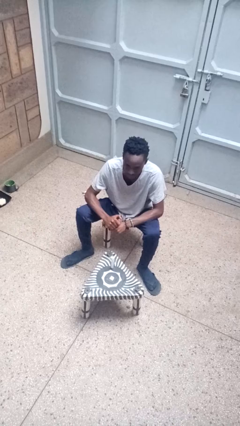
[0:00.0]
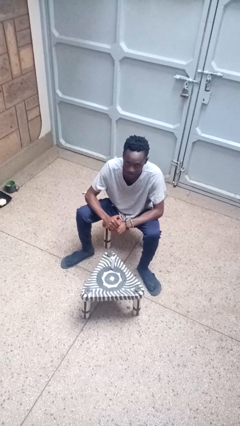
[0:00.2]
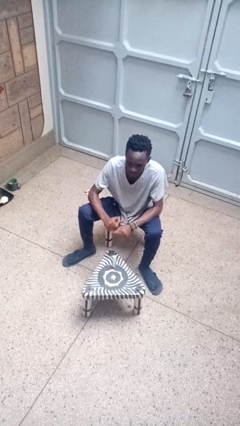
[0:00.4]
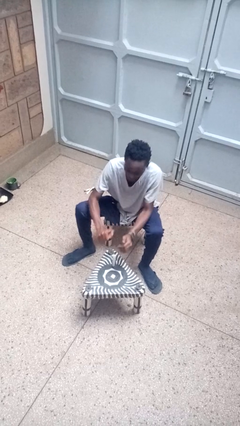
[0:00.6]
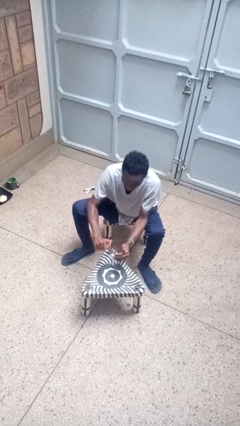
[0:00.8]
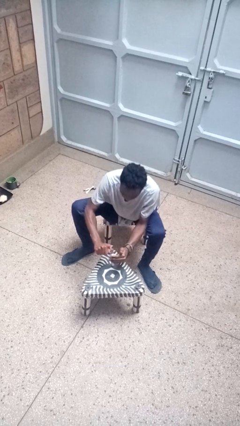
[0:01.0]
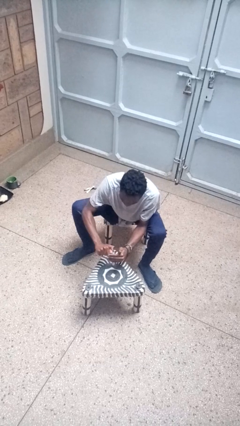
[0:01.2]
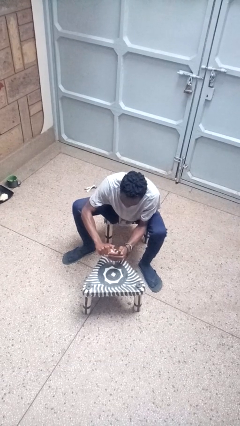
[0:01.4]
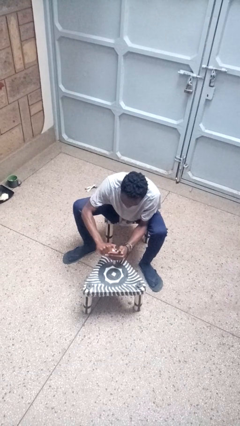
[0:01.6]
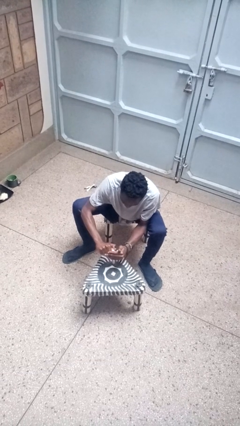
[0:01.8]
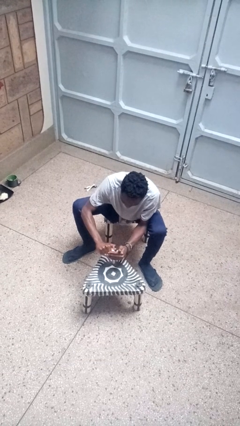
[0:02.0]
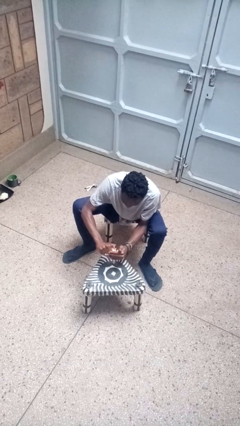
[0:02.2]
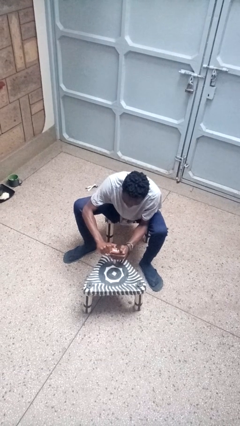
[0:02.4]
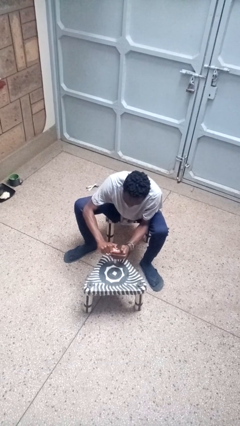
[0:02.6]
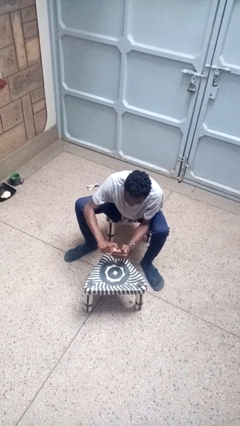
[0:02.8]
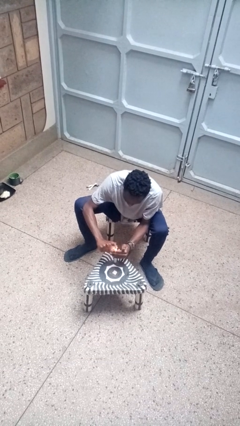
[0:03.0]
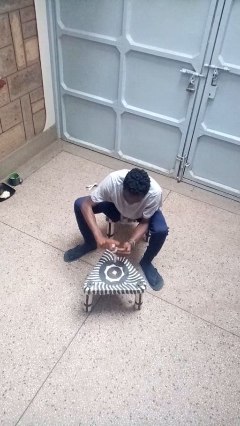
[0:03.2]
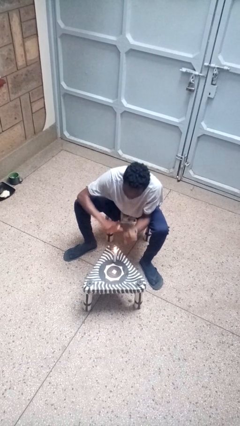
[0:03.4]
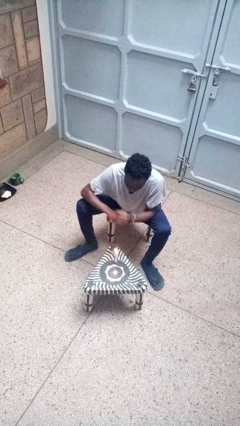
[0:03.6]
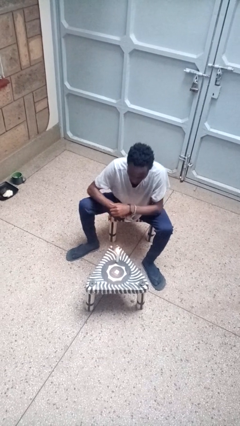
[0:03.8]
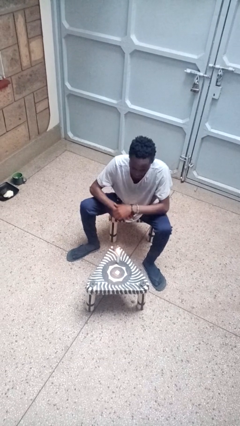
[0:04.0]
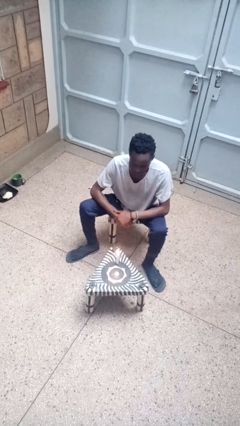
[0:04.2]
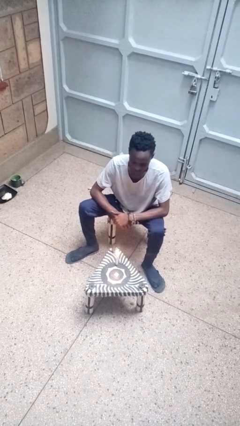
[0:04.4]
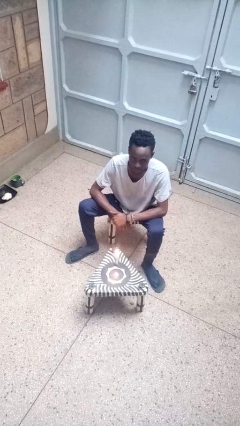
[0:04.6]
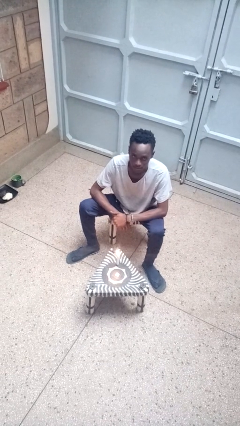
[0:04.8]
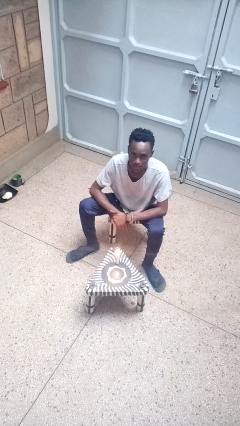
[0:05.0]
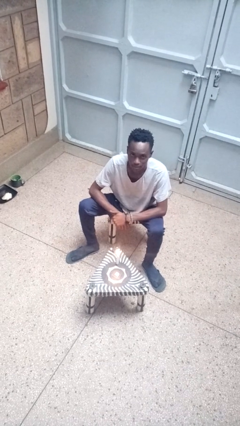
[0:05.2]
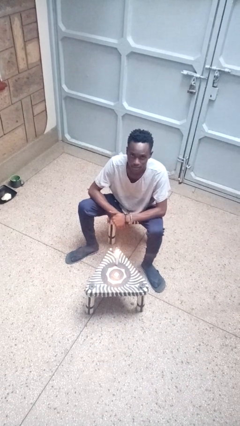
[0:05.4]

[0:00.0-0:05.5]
person lights candle

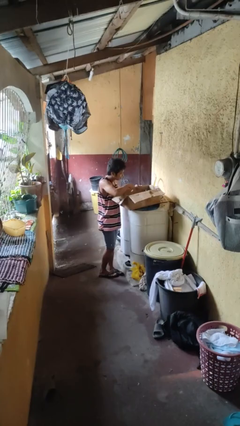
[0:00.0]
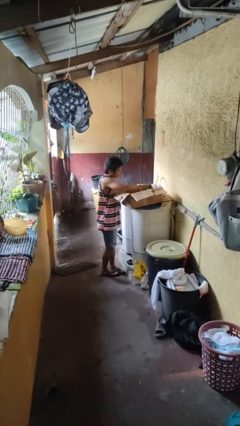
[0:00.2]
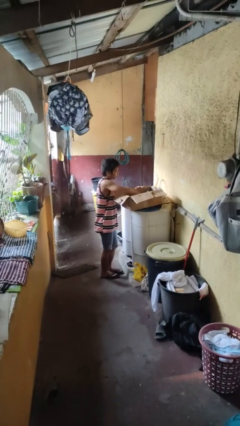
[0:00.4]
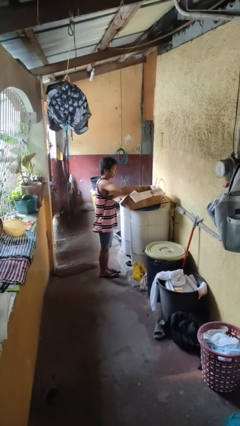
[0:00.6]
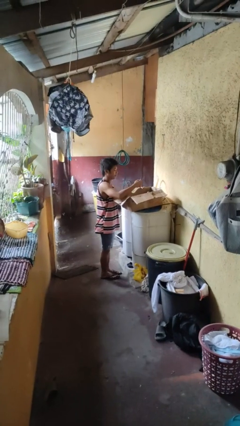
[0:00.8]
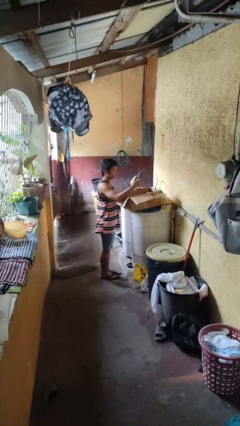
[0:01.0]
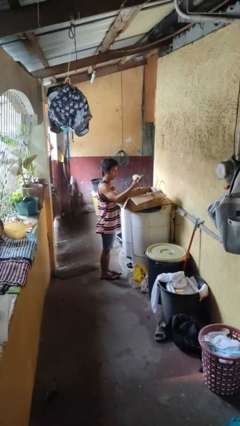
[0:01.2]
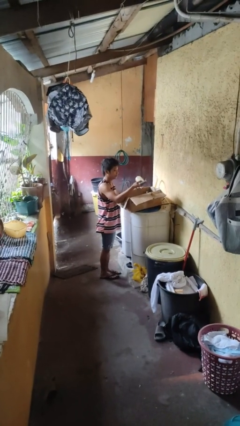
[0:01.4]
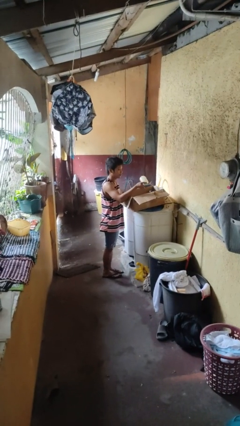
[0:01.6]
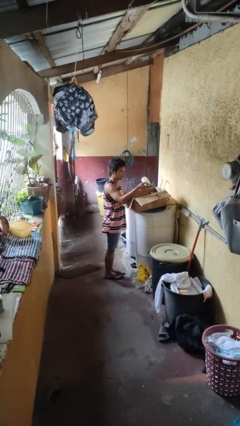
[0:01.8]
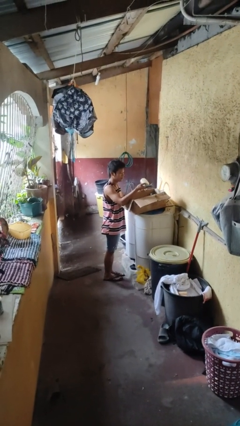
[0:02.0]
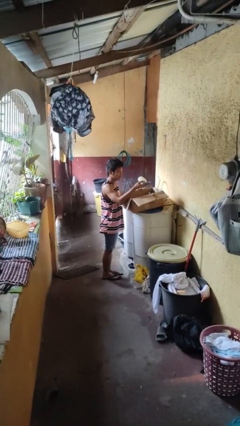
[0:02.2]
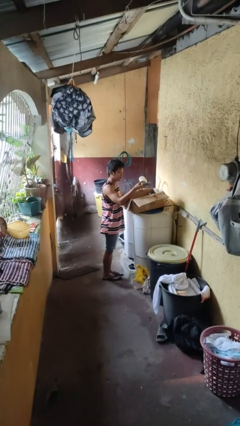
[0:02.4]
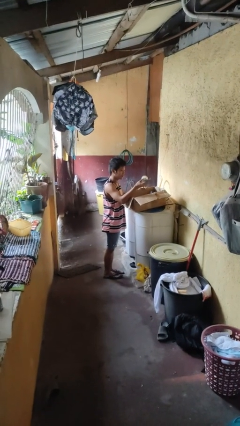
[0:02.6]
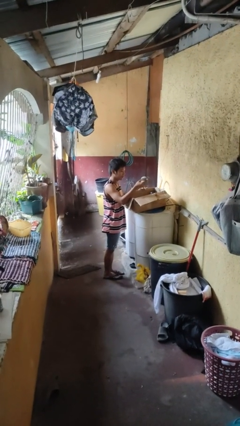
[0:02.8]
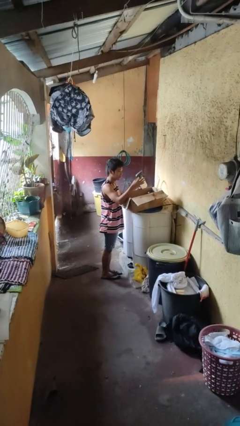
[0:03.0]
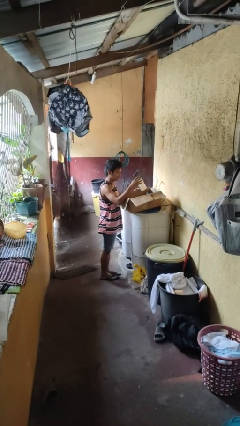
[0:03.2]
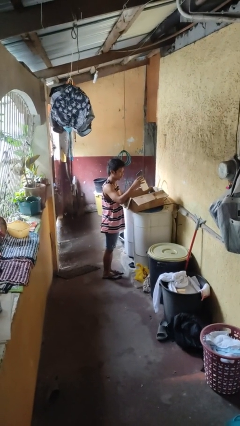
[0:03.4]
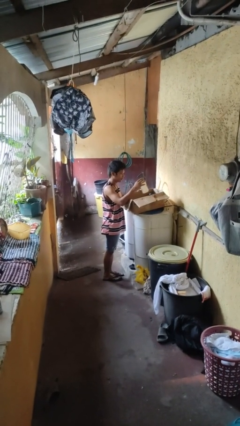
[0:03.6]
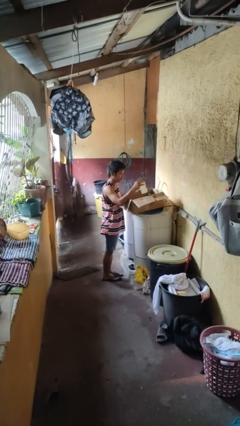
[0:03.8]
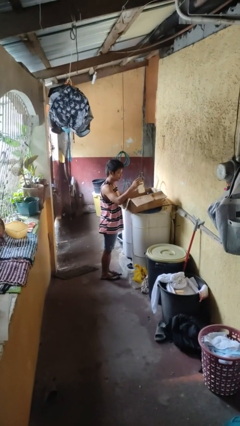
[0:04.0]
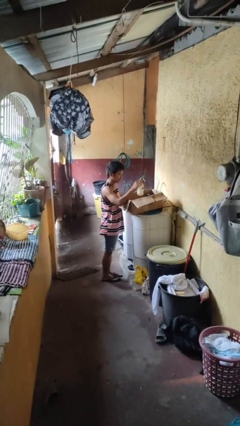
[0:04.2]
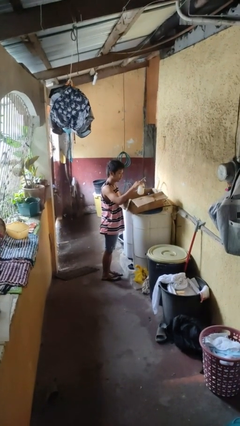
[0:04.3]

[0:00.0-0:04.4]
person takes object from box

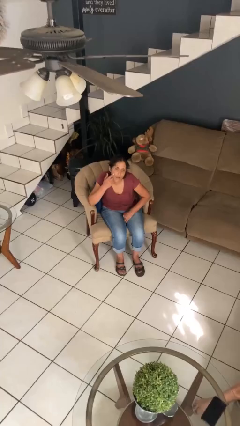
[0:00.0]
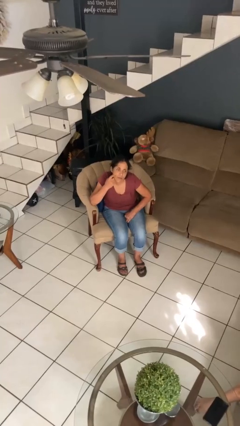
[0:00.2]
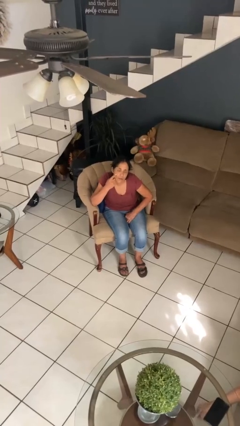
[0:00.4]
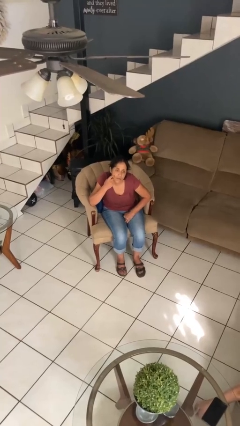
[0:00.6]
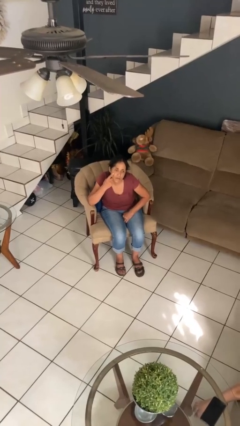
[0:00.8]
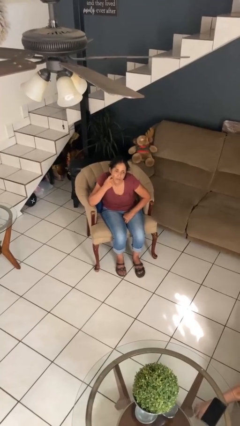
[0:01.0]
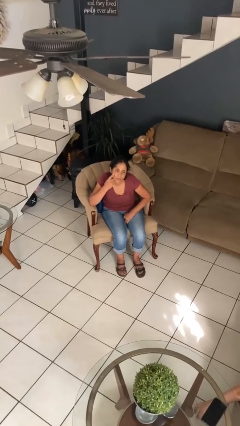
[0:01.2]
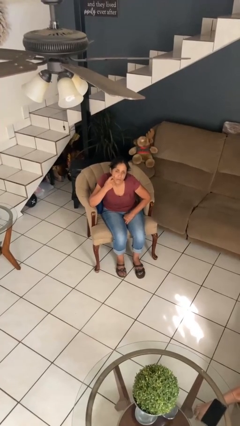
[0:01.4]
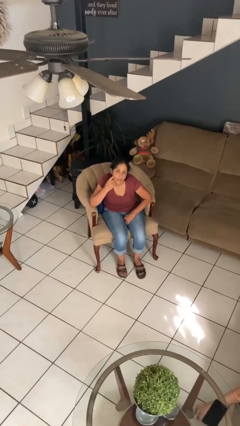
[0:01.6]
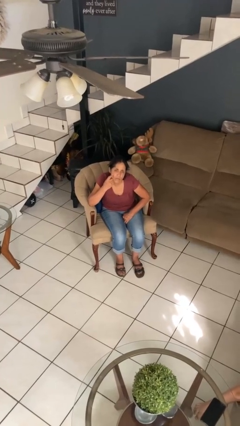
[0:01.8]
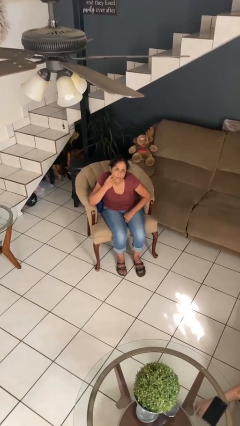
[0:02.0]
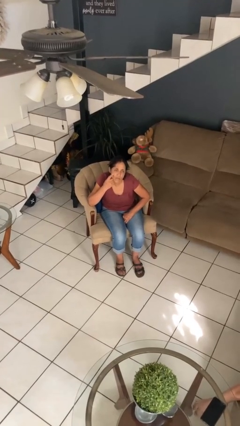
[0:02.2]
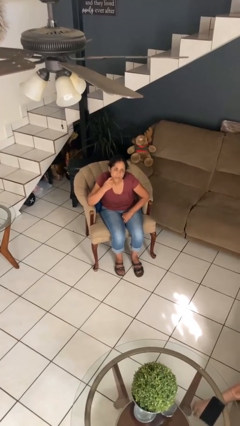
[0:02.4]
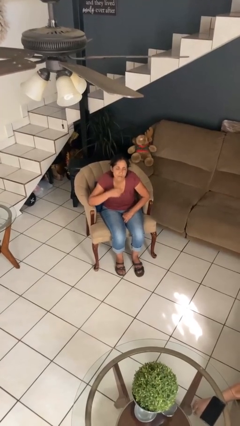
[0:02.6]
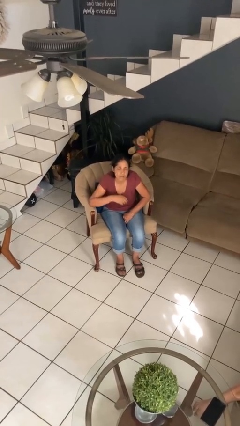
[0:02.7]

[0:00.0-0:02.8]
person scratches face

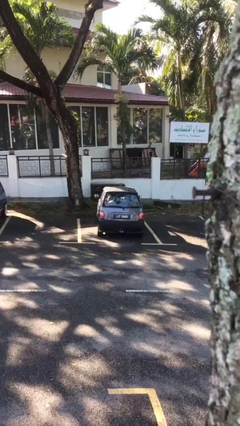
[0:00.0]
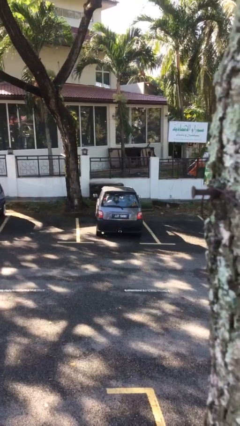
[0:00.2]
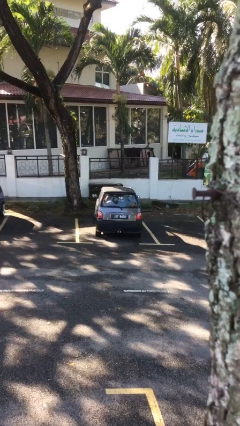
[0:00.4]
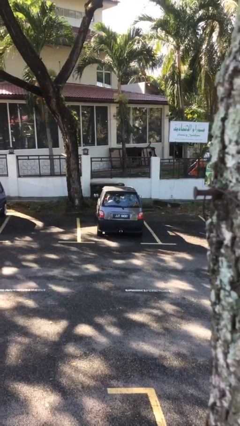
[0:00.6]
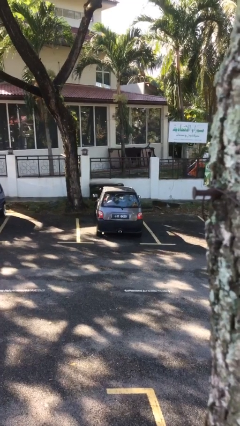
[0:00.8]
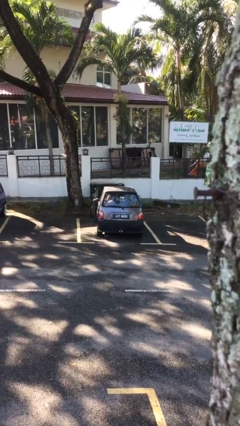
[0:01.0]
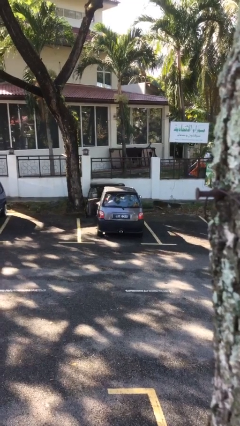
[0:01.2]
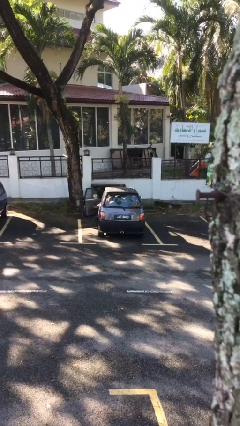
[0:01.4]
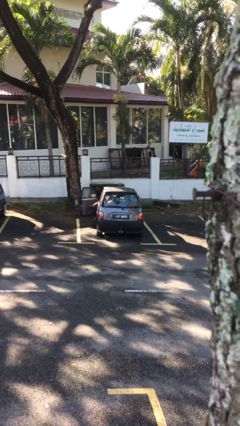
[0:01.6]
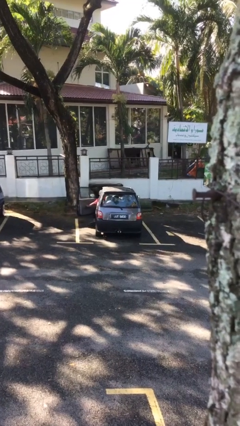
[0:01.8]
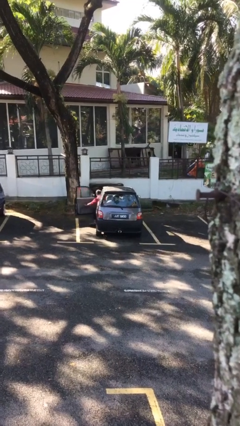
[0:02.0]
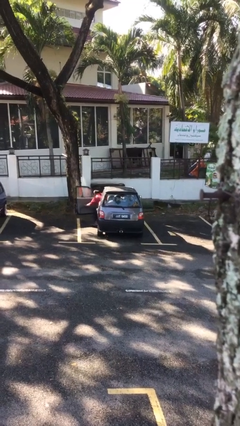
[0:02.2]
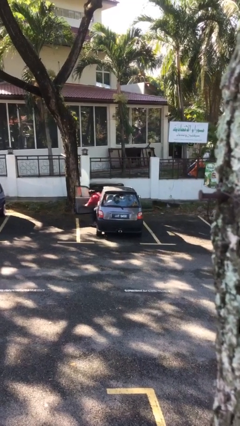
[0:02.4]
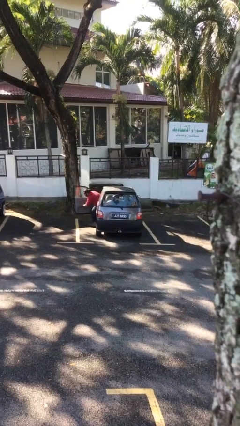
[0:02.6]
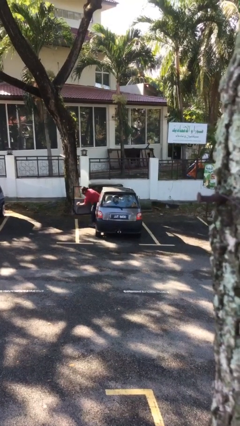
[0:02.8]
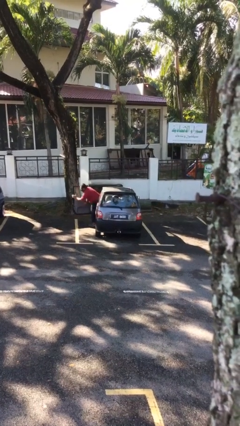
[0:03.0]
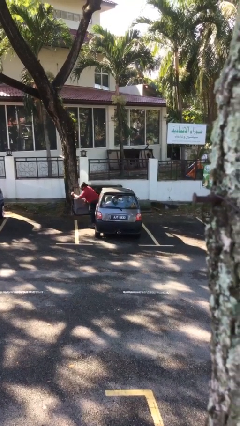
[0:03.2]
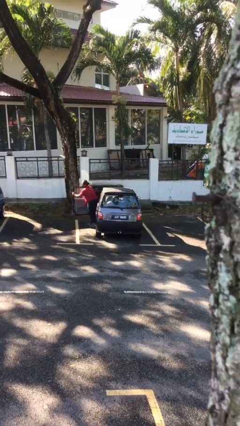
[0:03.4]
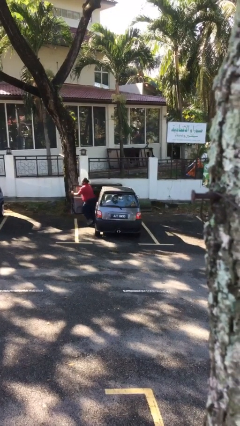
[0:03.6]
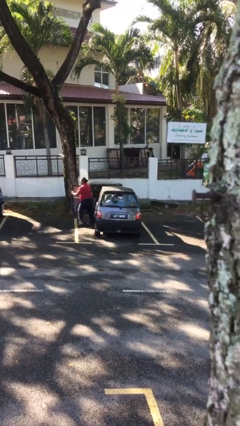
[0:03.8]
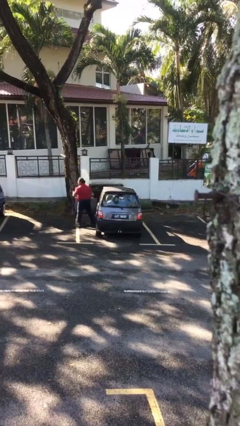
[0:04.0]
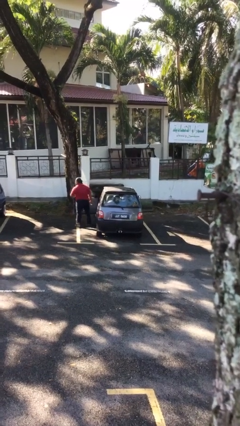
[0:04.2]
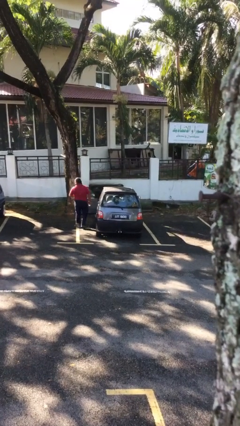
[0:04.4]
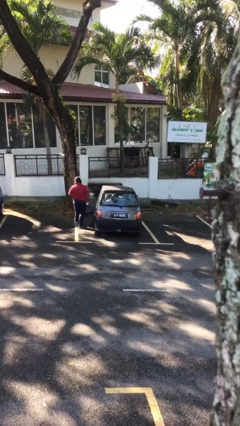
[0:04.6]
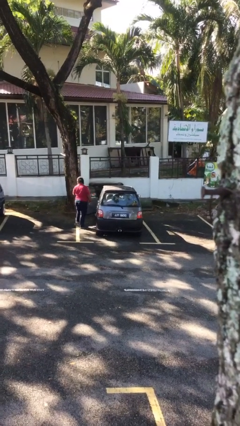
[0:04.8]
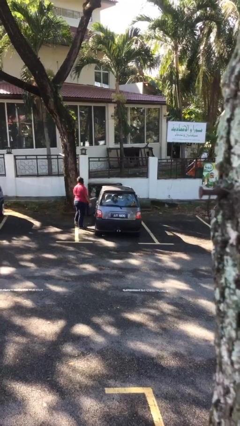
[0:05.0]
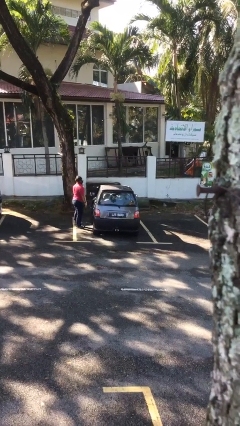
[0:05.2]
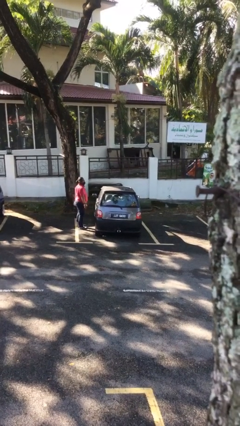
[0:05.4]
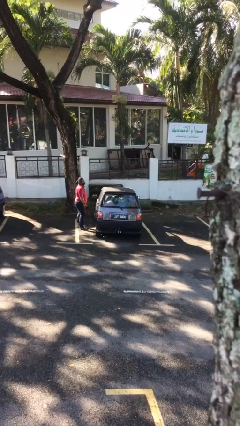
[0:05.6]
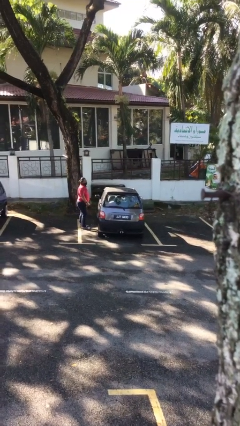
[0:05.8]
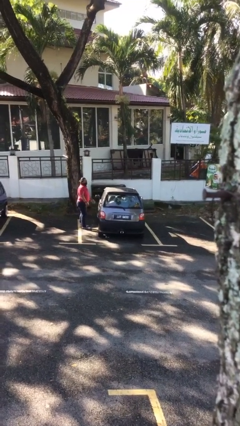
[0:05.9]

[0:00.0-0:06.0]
car drops off person
